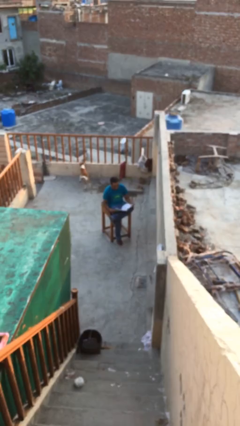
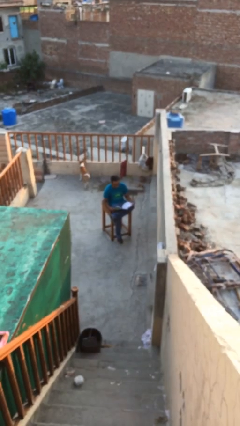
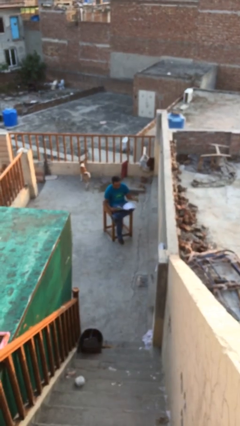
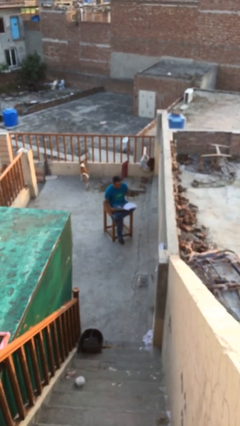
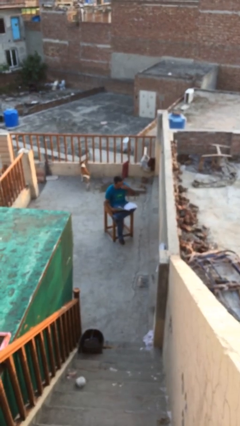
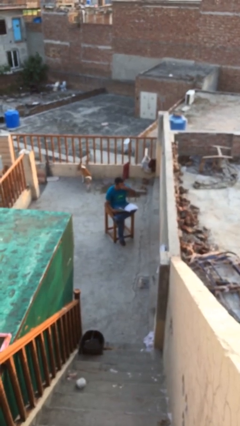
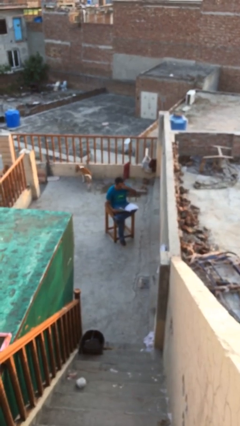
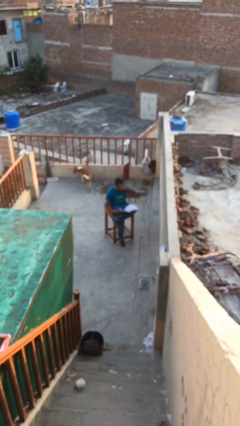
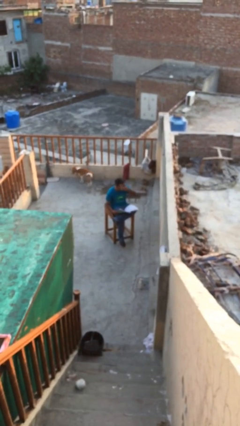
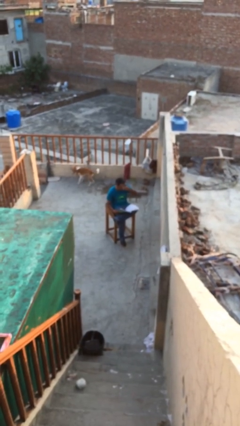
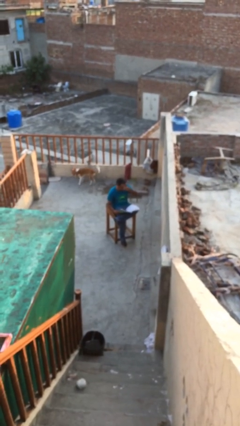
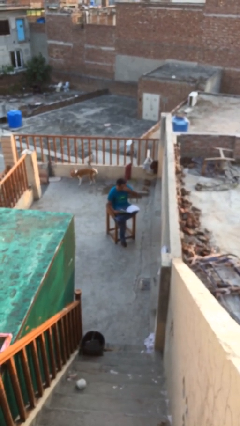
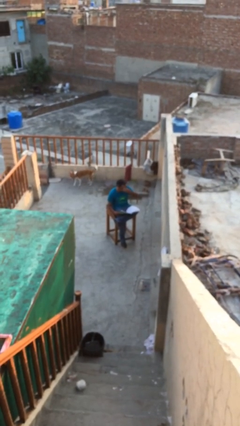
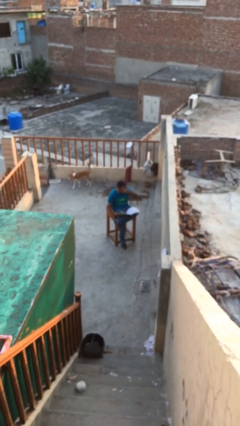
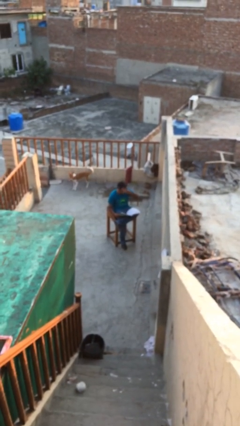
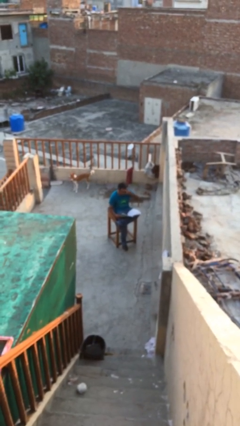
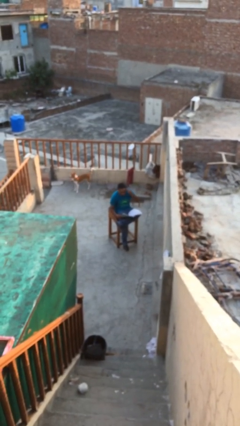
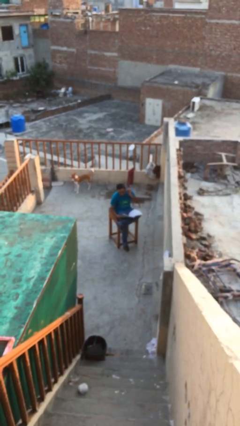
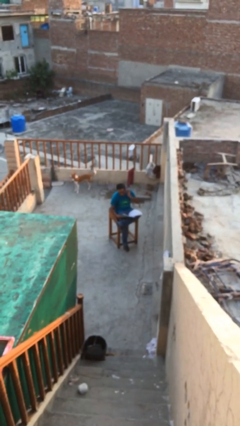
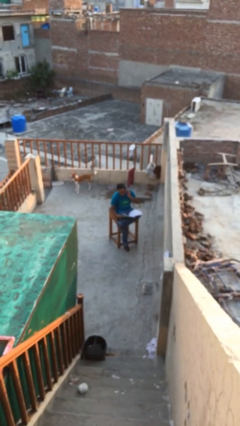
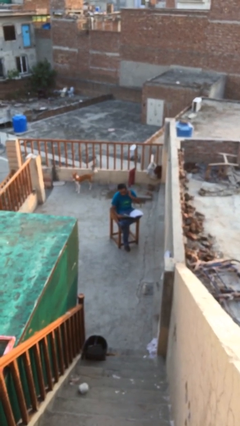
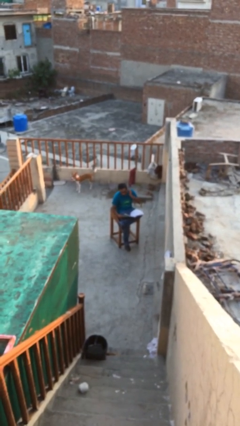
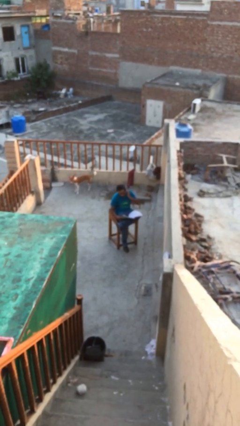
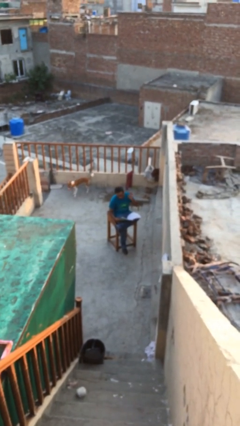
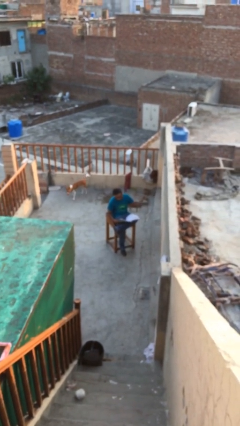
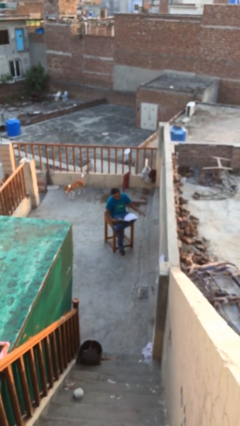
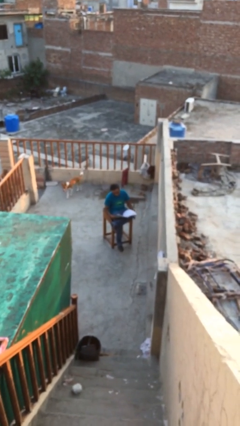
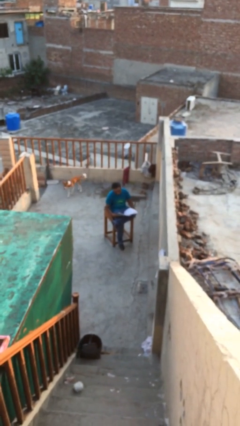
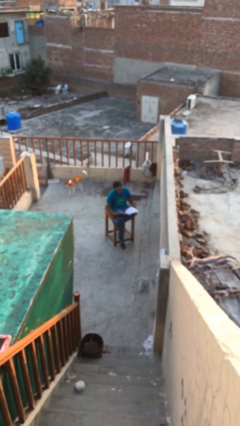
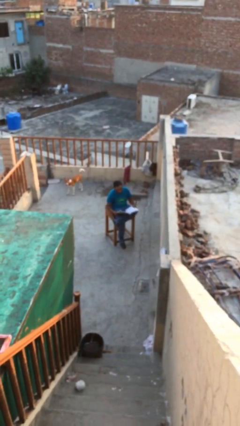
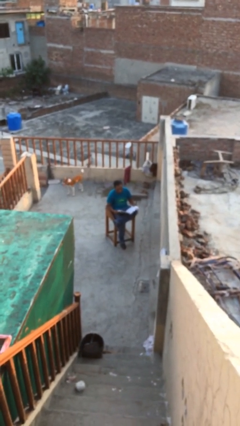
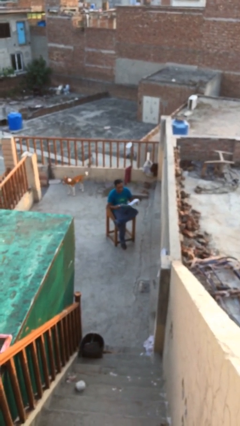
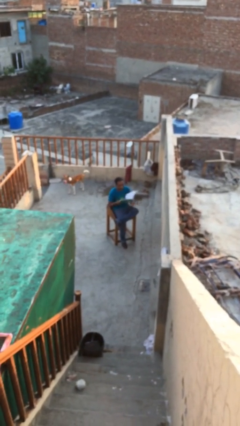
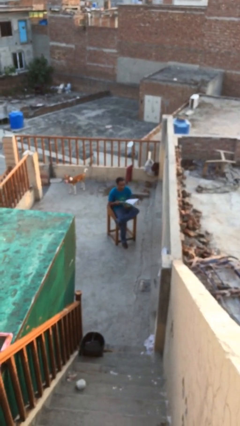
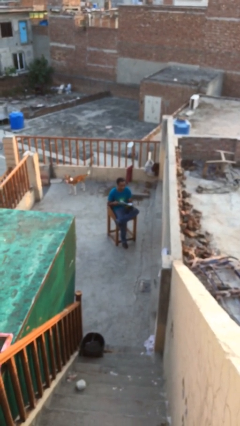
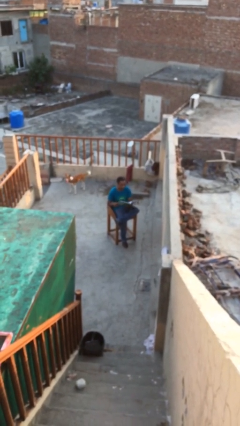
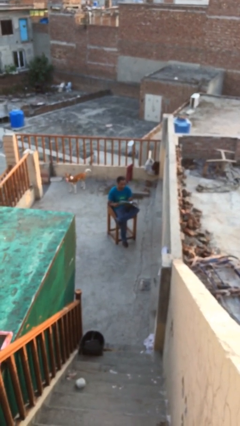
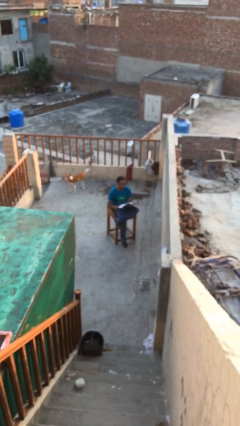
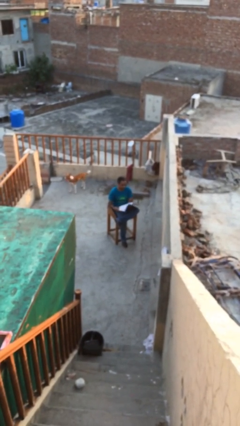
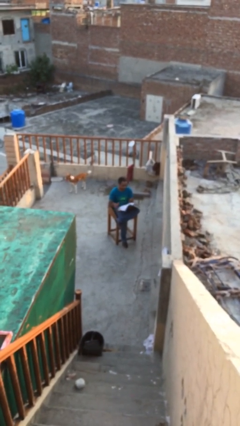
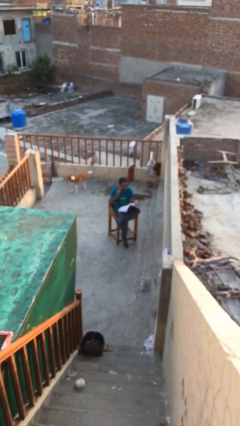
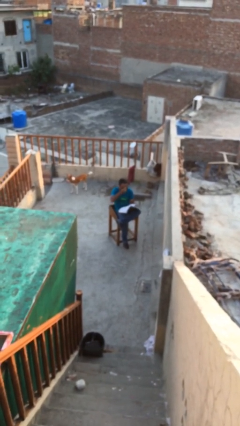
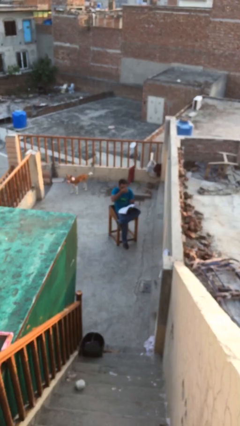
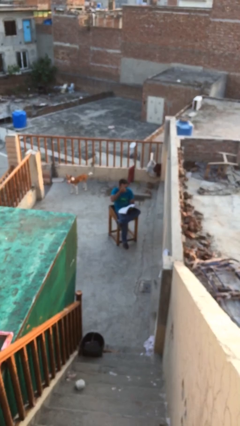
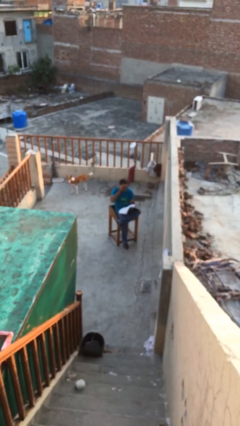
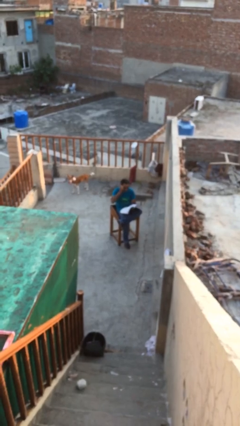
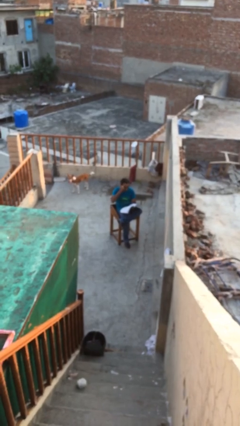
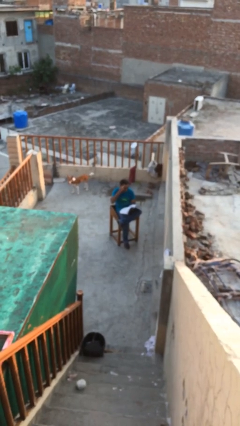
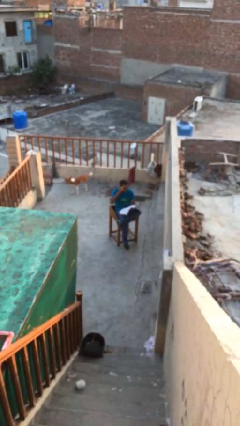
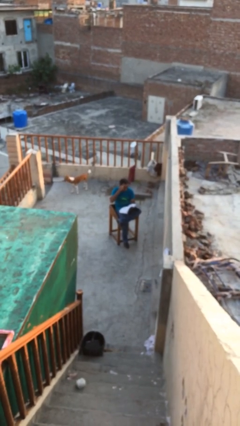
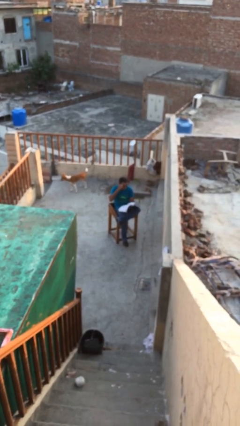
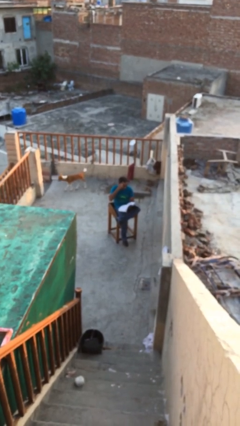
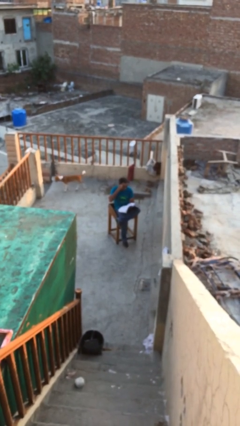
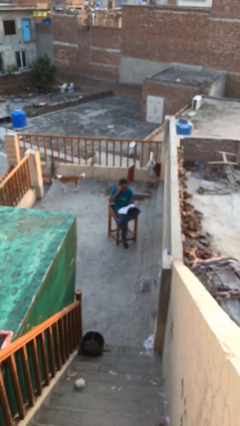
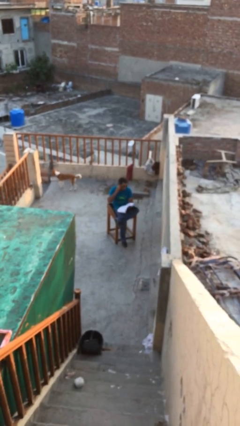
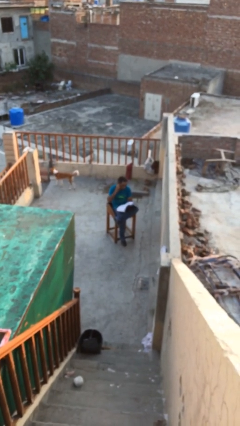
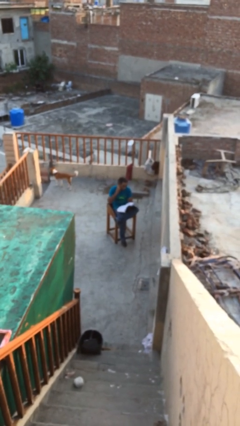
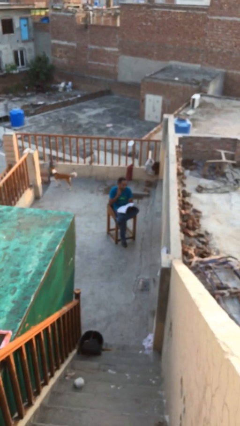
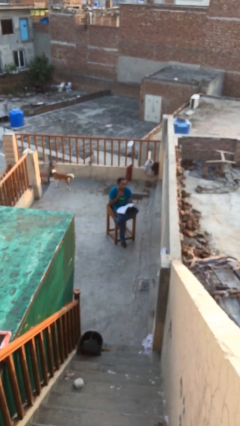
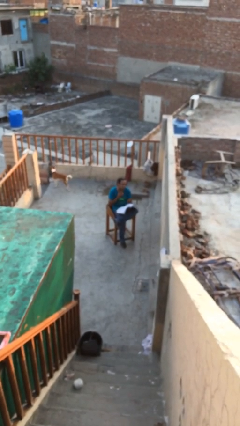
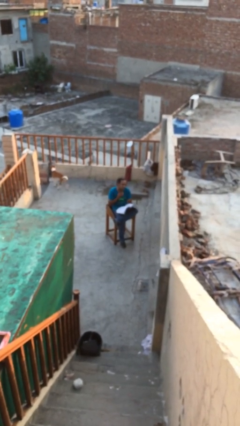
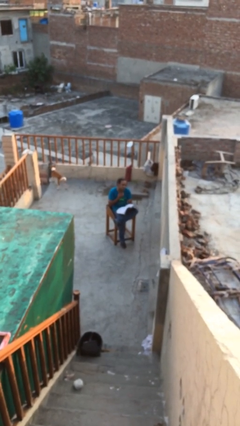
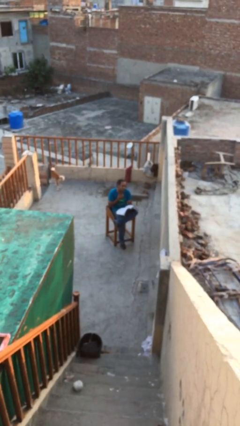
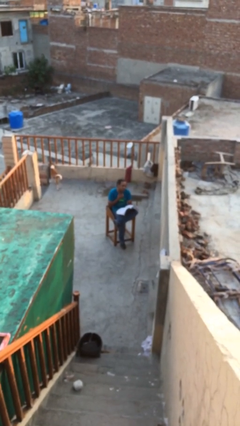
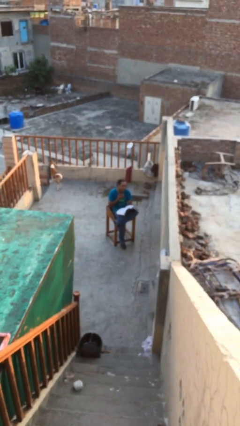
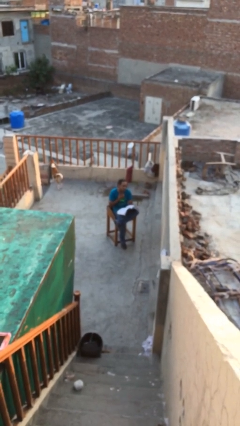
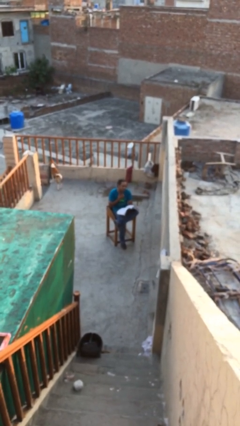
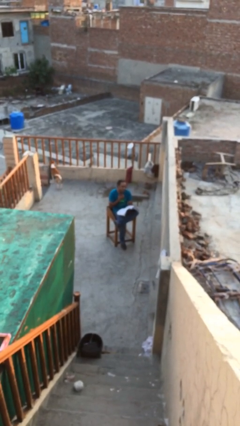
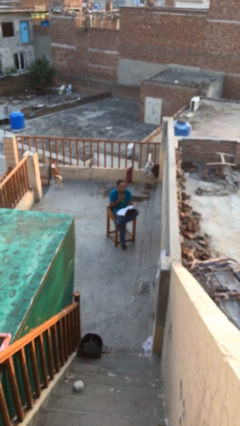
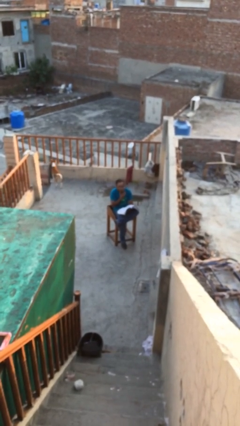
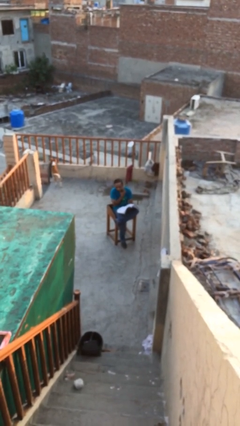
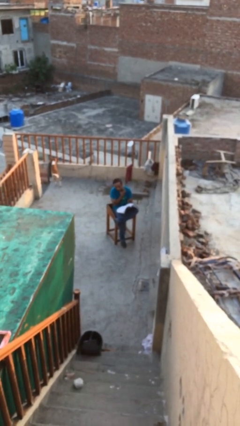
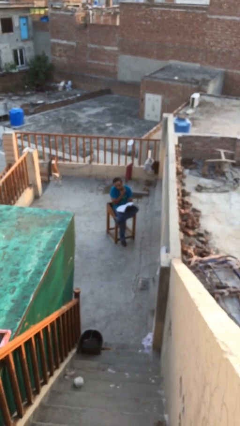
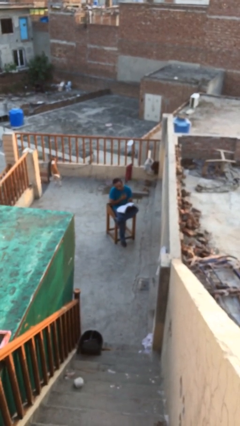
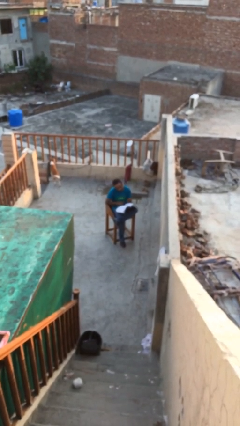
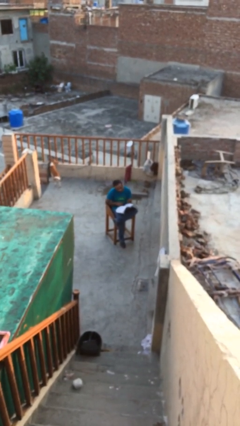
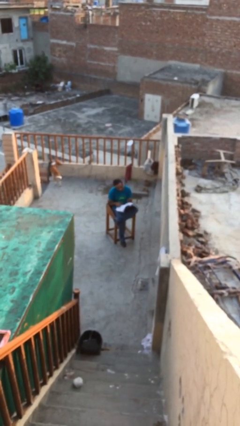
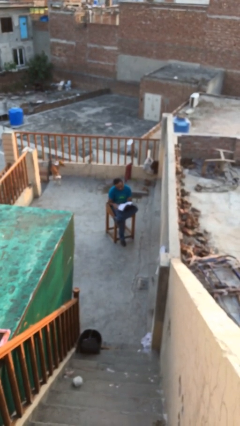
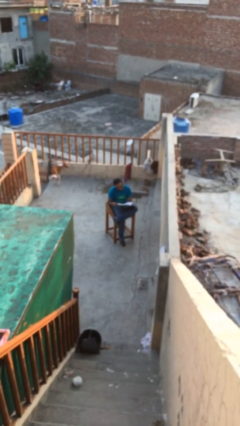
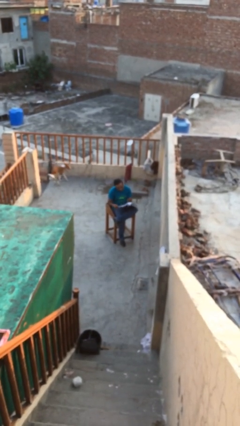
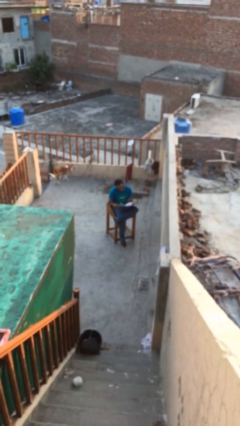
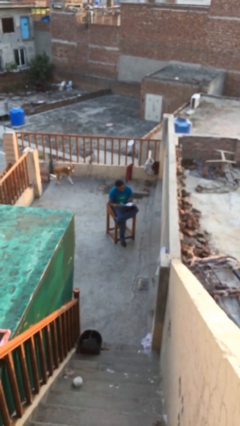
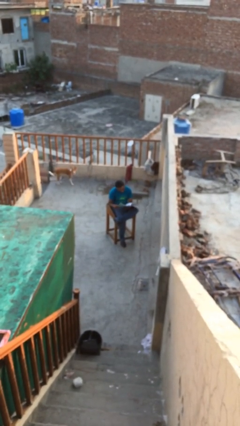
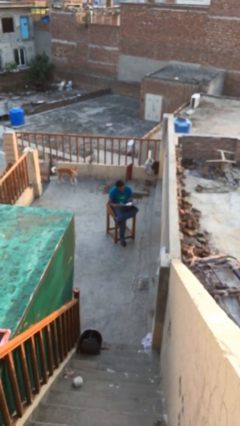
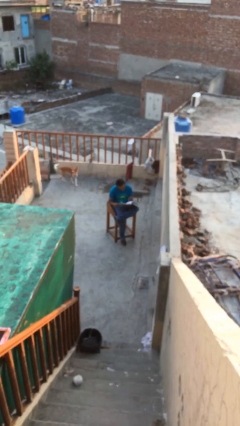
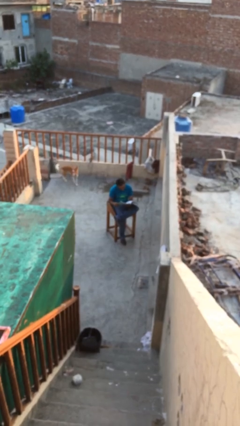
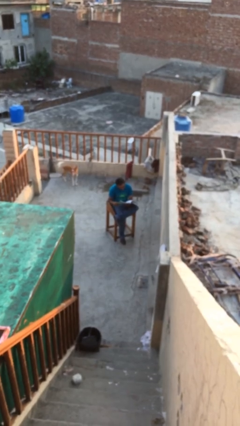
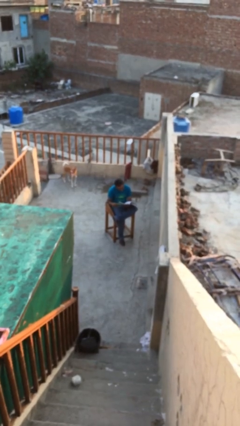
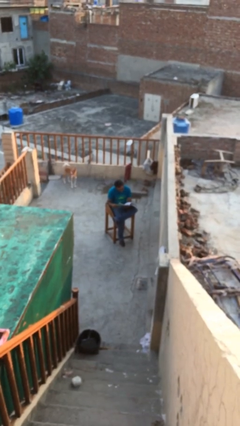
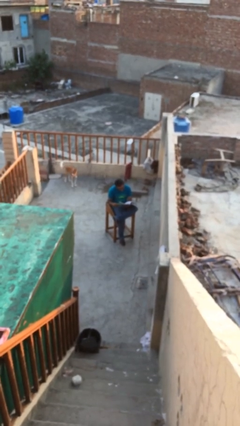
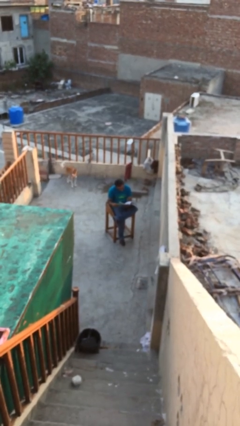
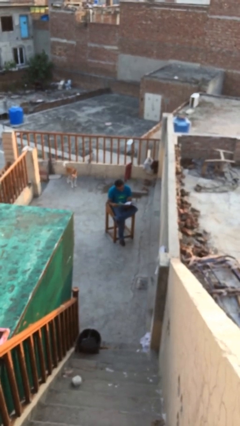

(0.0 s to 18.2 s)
person reads document

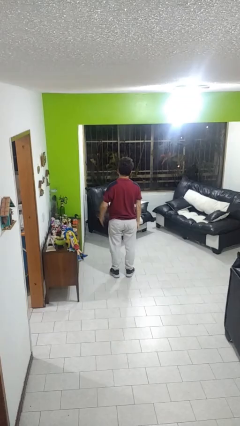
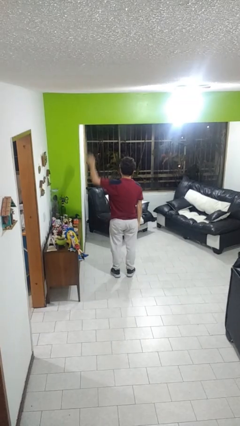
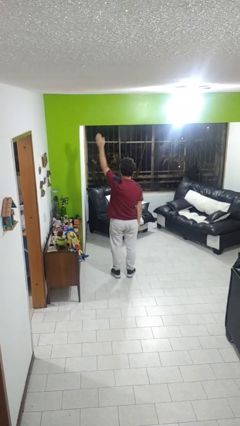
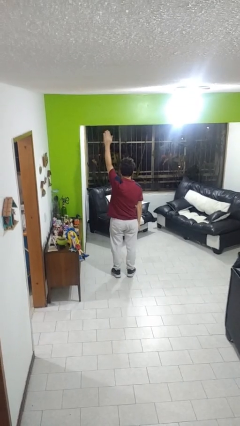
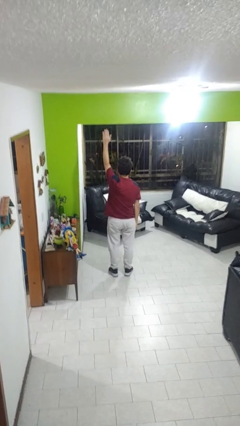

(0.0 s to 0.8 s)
person gestures raise hand
